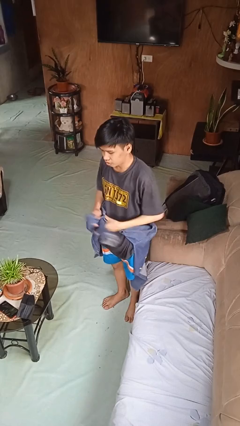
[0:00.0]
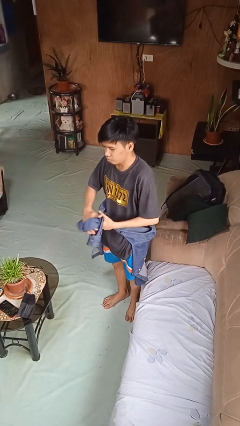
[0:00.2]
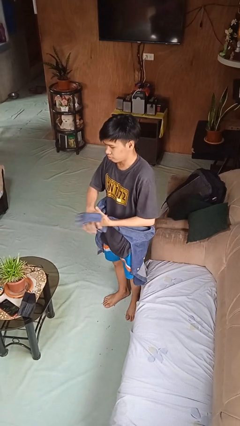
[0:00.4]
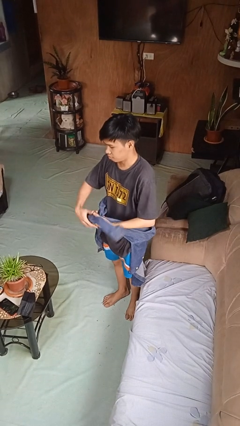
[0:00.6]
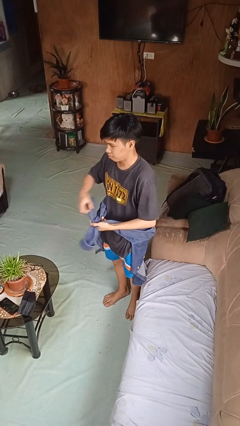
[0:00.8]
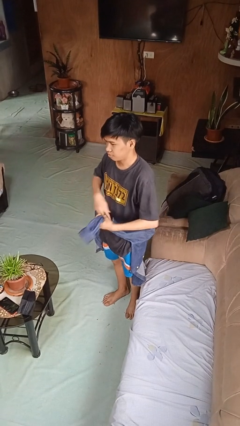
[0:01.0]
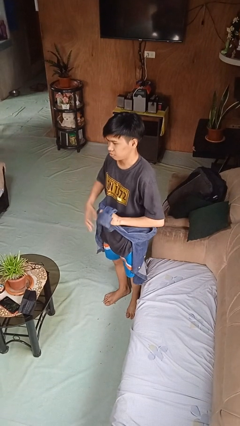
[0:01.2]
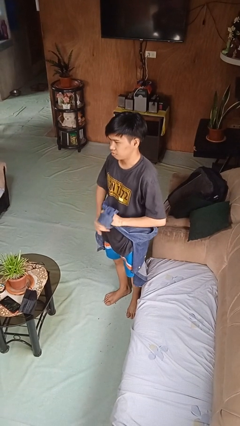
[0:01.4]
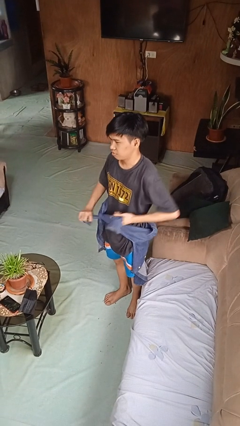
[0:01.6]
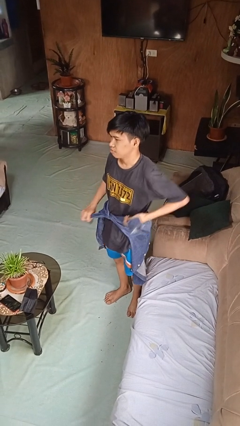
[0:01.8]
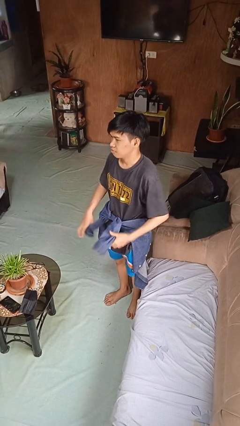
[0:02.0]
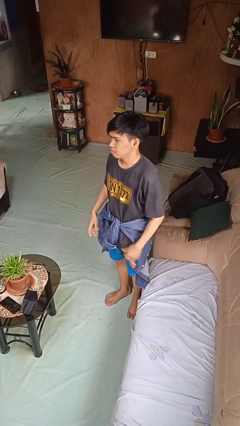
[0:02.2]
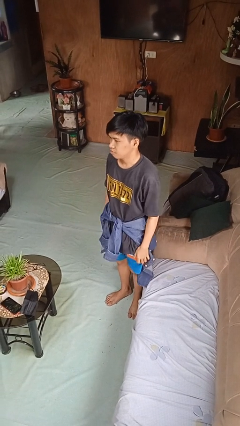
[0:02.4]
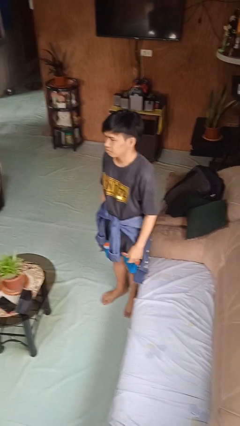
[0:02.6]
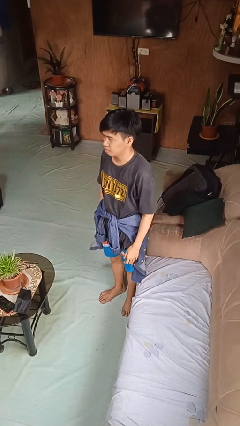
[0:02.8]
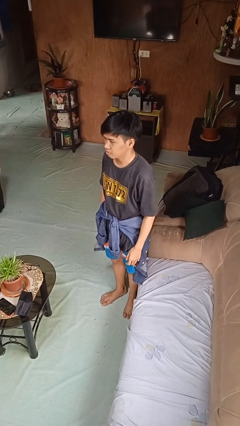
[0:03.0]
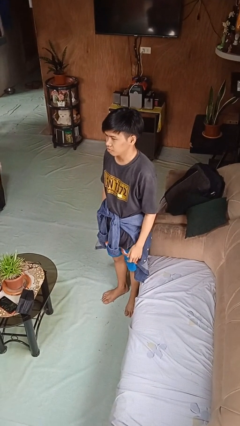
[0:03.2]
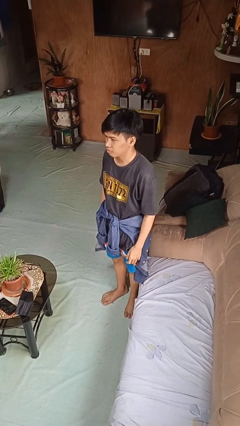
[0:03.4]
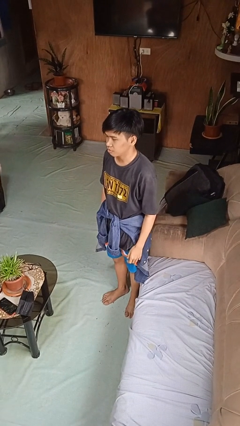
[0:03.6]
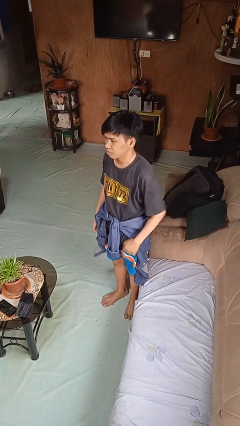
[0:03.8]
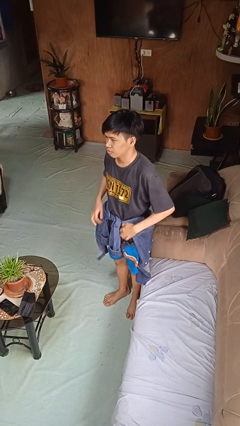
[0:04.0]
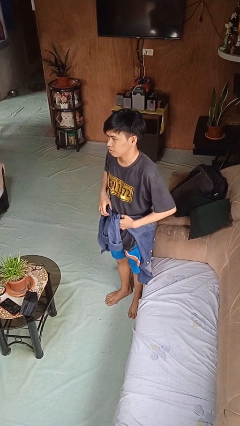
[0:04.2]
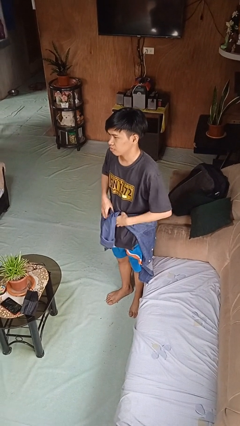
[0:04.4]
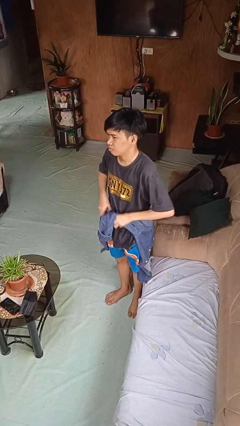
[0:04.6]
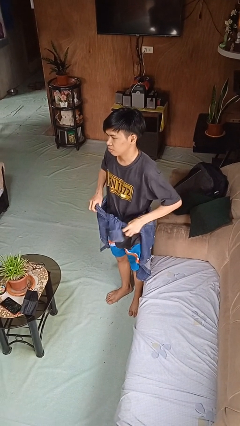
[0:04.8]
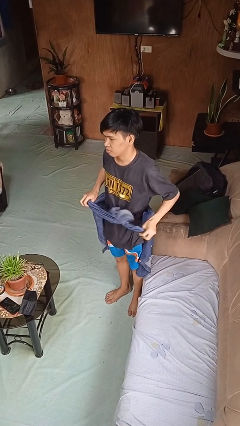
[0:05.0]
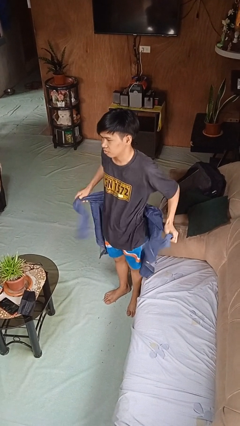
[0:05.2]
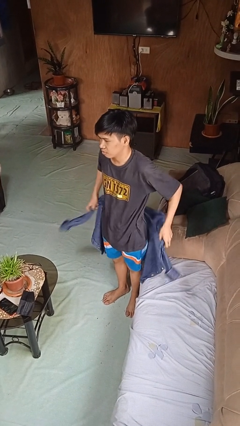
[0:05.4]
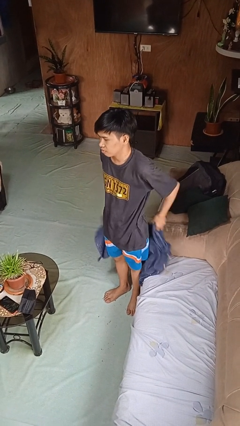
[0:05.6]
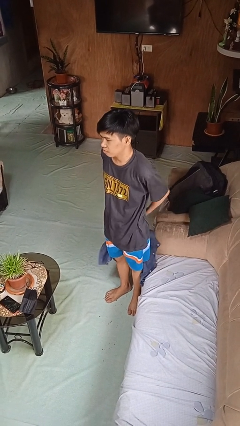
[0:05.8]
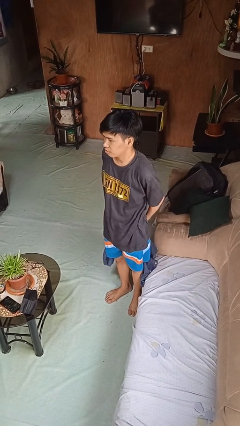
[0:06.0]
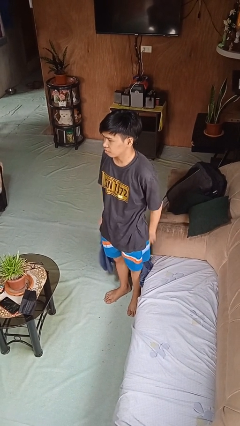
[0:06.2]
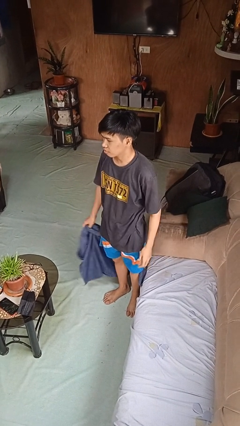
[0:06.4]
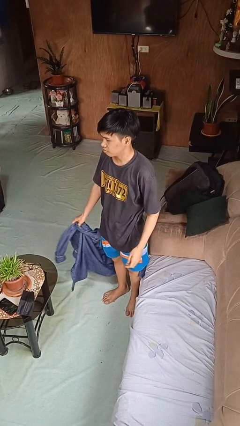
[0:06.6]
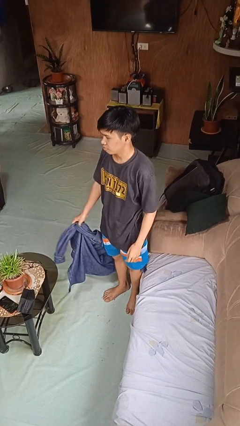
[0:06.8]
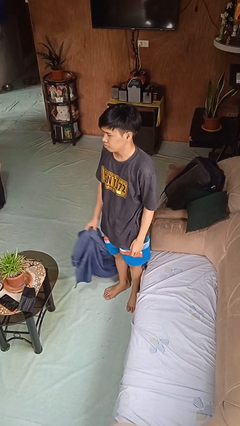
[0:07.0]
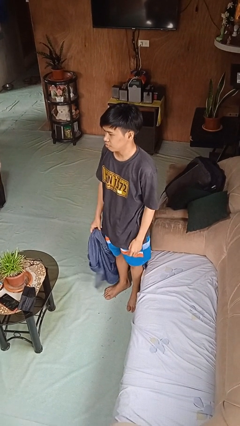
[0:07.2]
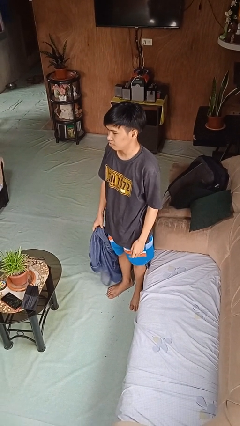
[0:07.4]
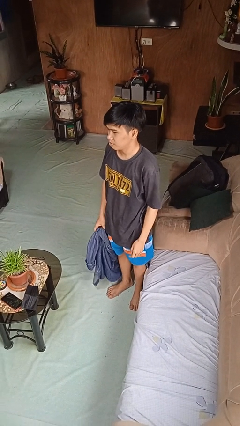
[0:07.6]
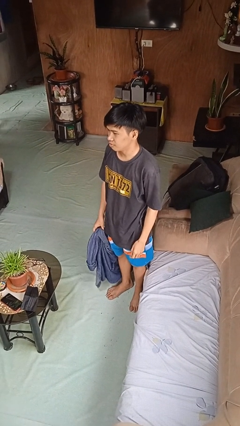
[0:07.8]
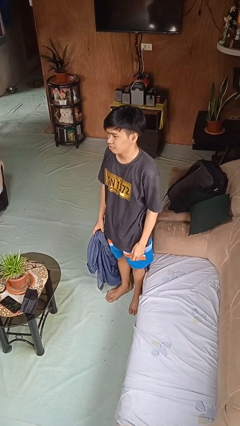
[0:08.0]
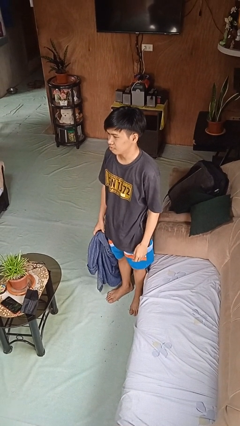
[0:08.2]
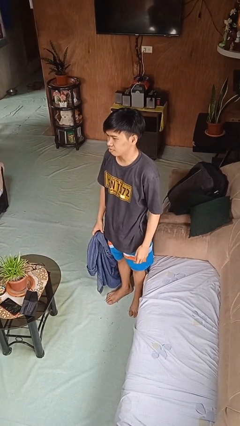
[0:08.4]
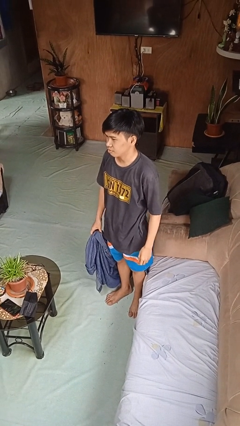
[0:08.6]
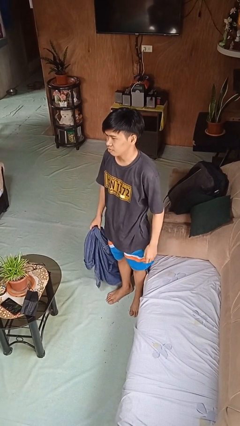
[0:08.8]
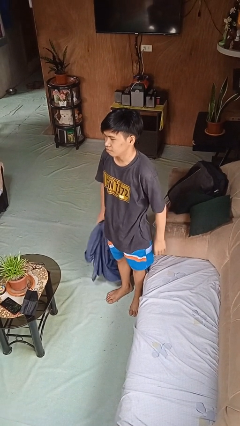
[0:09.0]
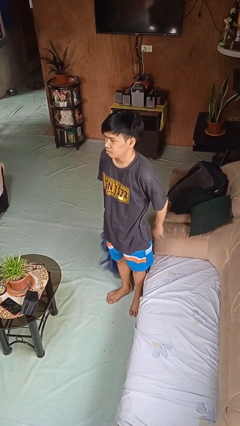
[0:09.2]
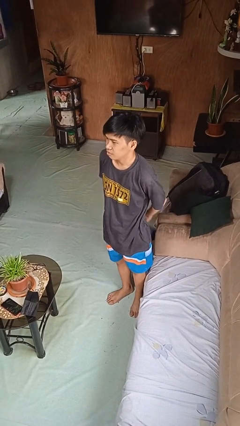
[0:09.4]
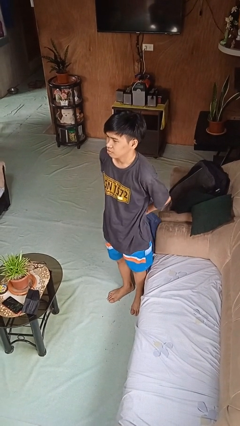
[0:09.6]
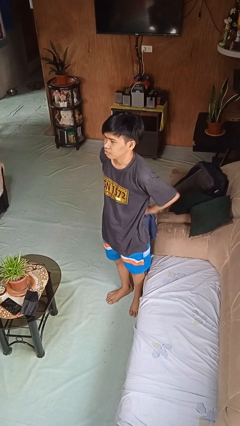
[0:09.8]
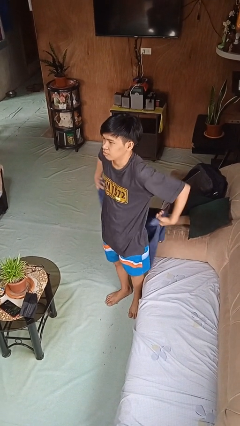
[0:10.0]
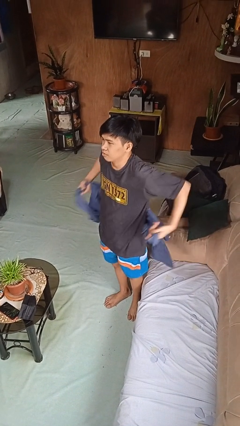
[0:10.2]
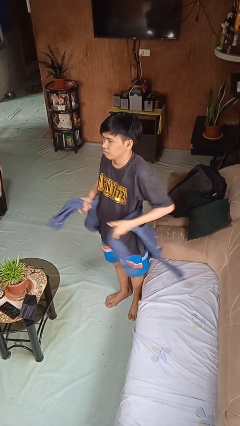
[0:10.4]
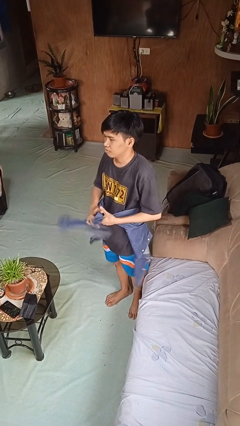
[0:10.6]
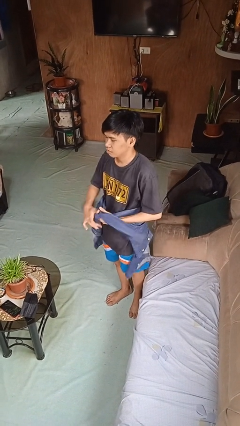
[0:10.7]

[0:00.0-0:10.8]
person ties jacket around waist

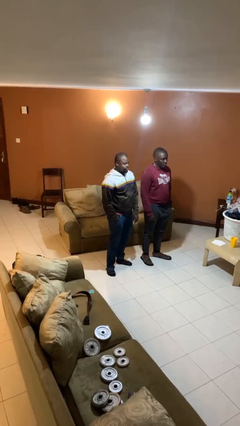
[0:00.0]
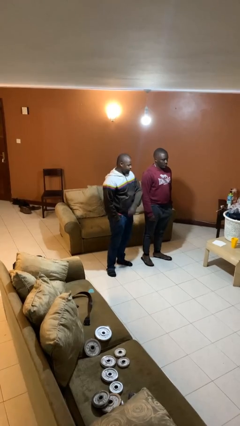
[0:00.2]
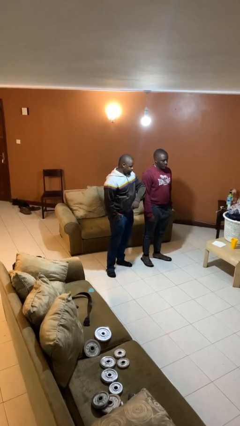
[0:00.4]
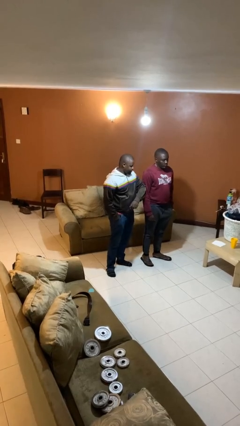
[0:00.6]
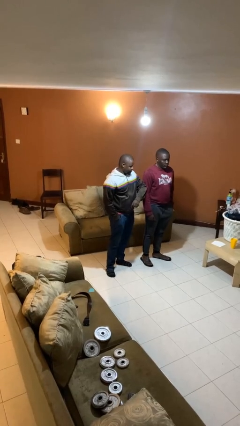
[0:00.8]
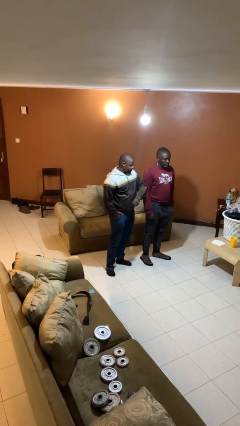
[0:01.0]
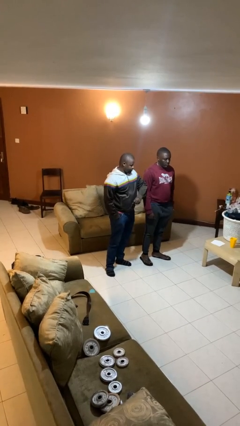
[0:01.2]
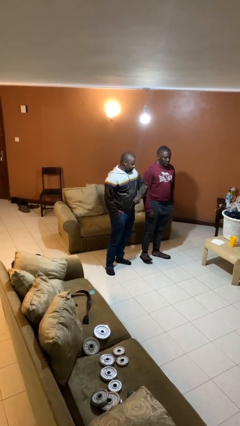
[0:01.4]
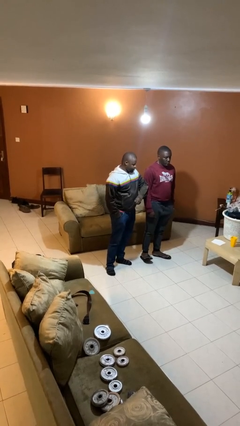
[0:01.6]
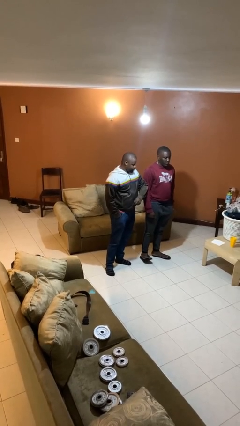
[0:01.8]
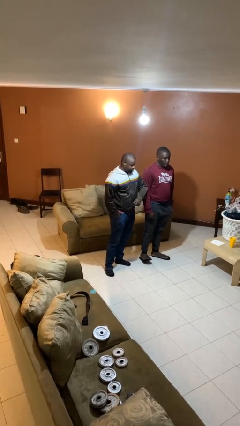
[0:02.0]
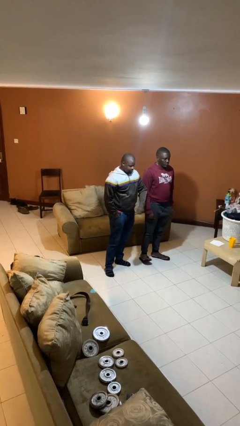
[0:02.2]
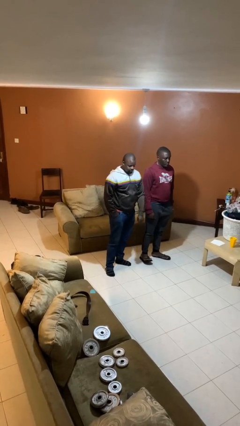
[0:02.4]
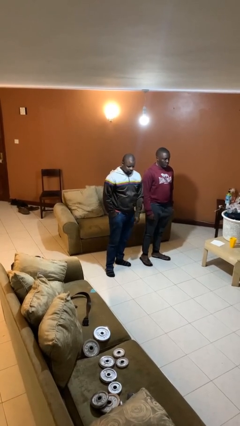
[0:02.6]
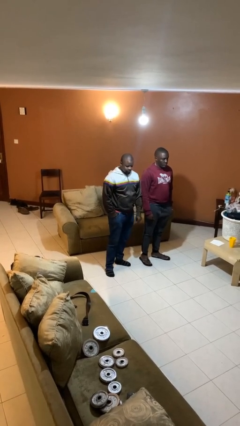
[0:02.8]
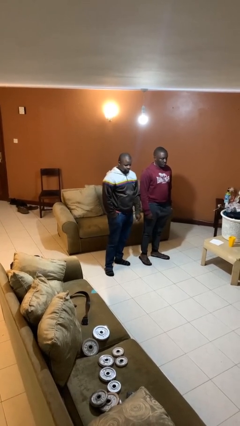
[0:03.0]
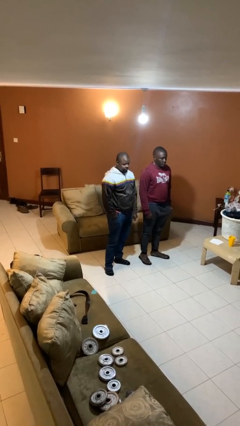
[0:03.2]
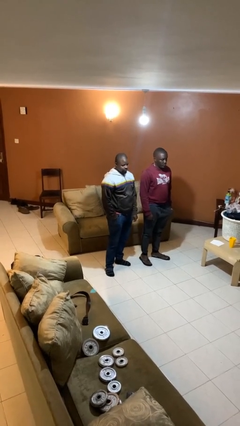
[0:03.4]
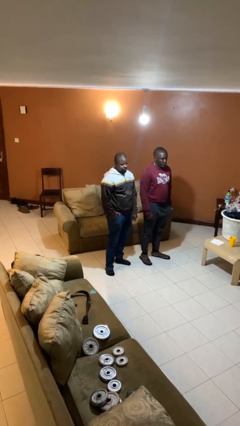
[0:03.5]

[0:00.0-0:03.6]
person nudges person with elbow

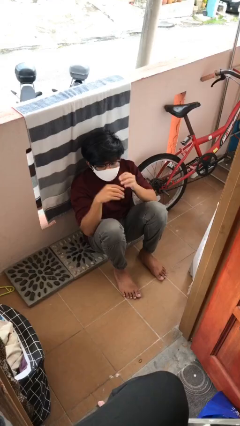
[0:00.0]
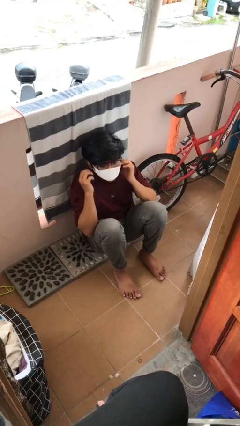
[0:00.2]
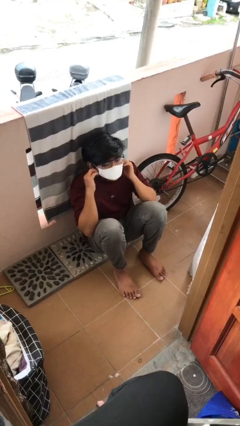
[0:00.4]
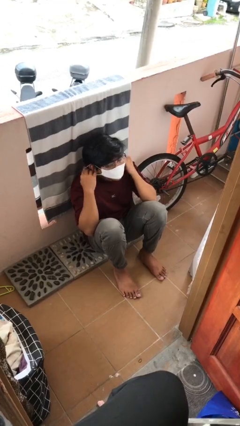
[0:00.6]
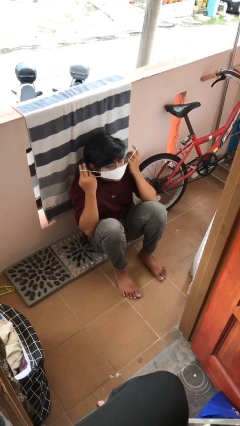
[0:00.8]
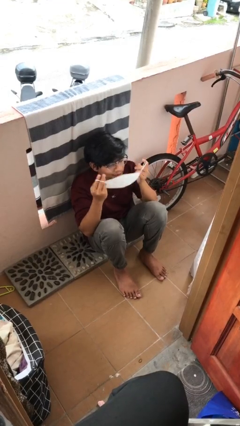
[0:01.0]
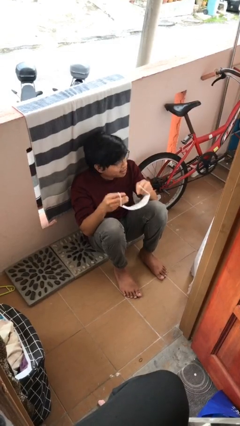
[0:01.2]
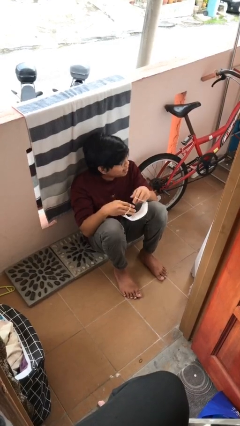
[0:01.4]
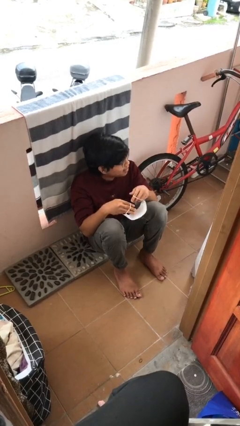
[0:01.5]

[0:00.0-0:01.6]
person takes off facemask

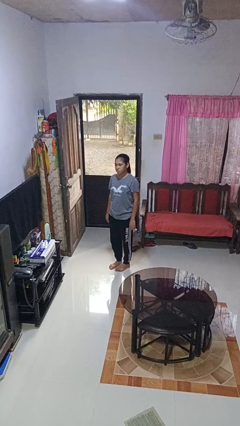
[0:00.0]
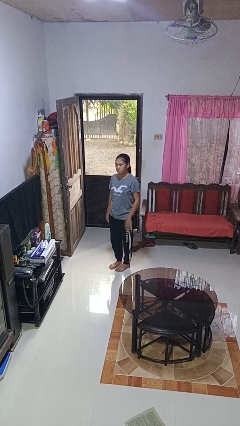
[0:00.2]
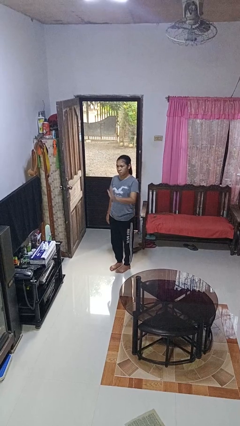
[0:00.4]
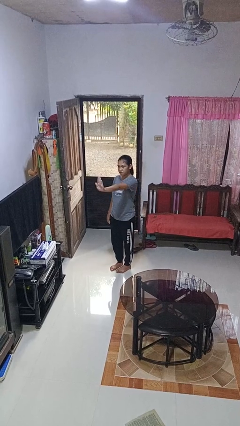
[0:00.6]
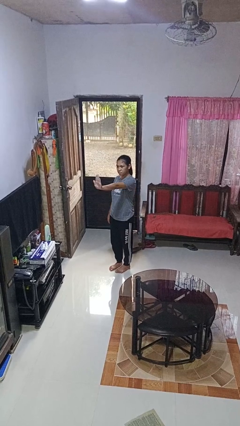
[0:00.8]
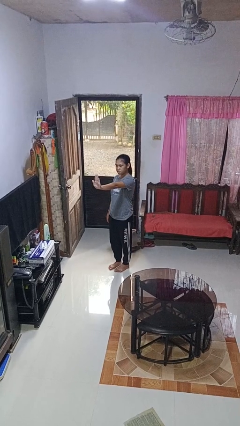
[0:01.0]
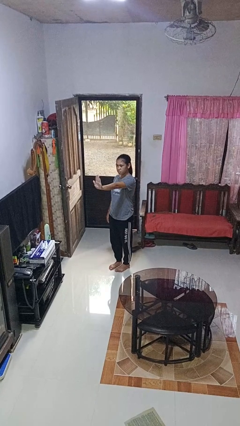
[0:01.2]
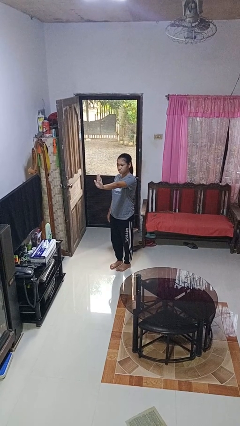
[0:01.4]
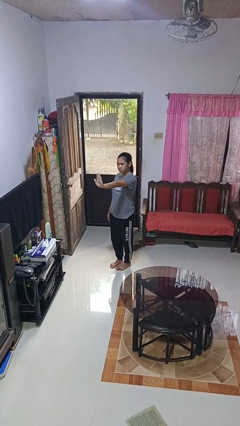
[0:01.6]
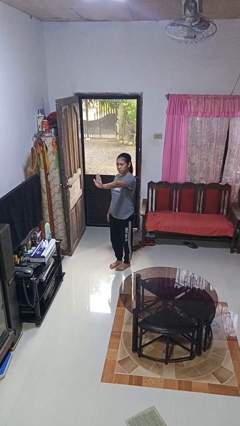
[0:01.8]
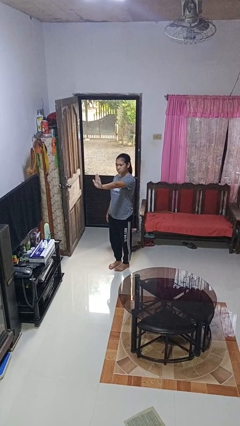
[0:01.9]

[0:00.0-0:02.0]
person gestures stop
